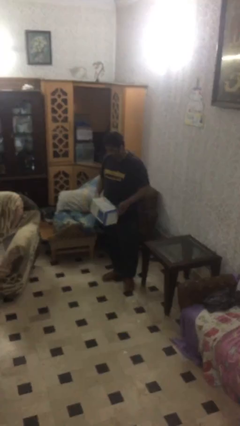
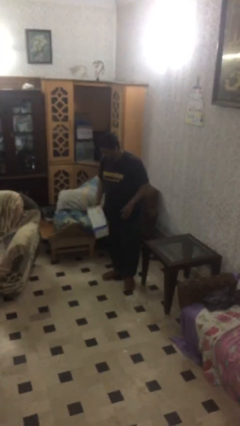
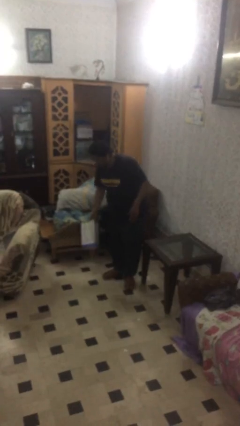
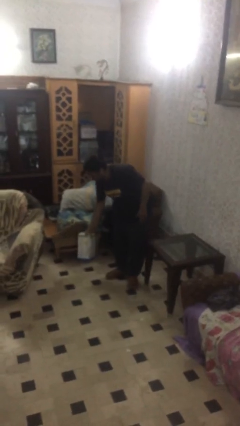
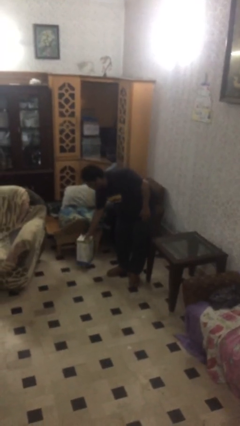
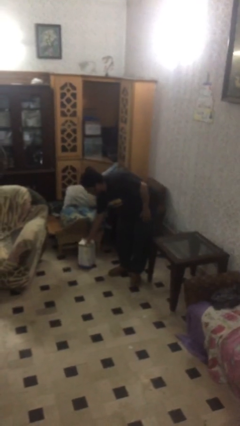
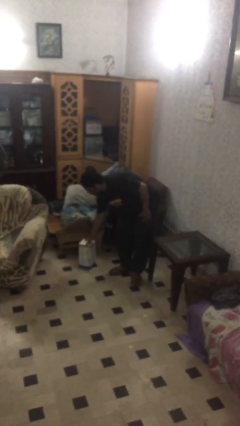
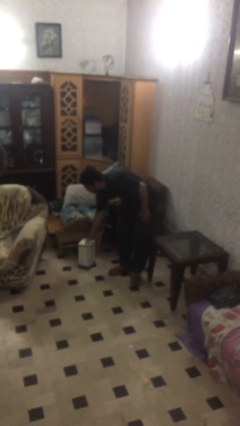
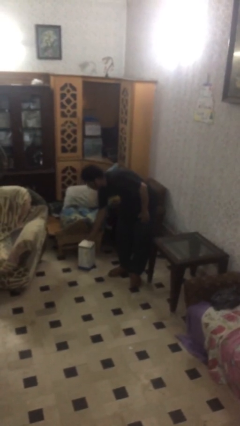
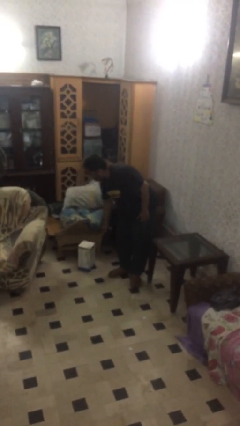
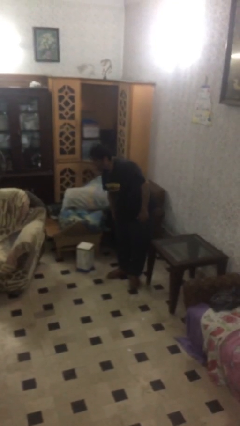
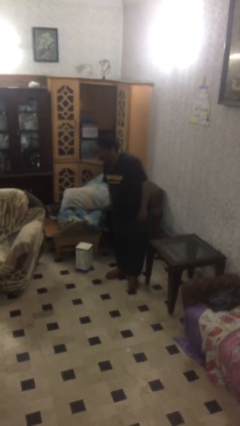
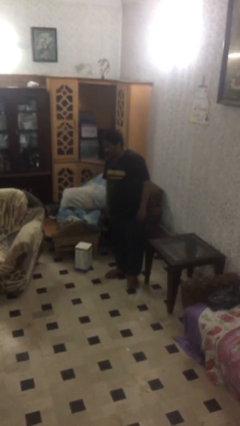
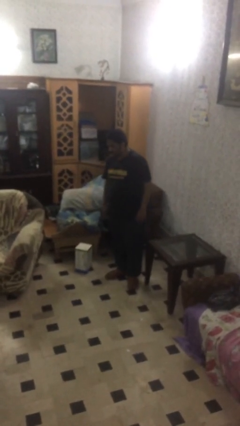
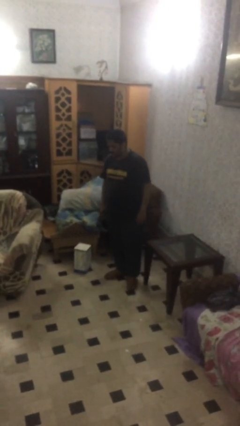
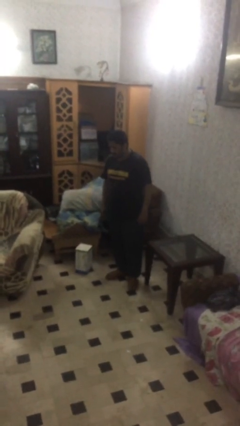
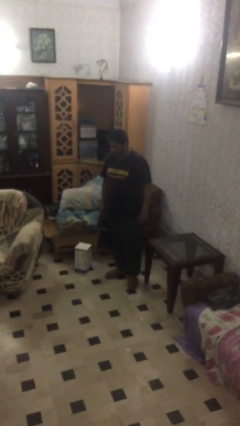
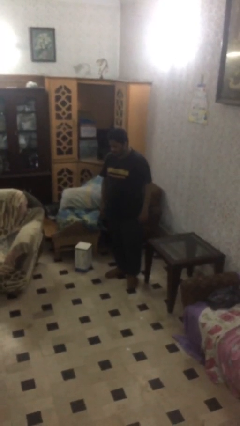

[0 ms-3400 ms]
person puts down object on floor

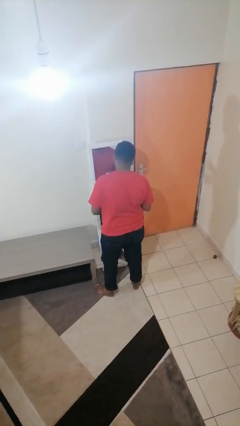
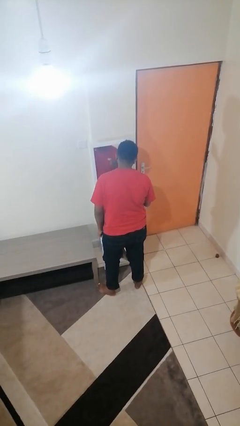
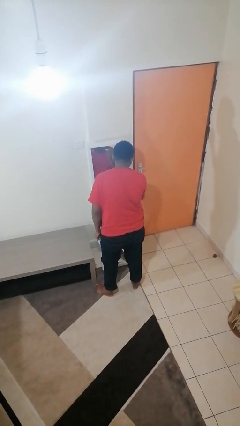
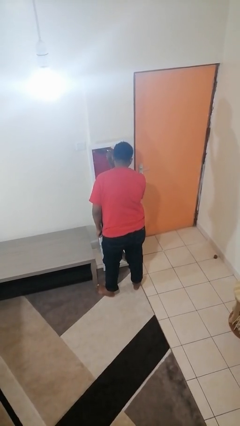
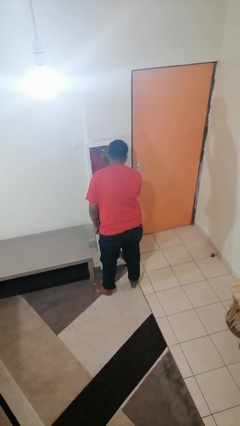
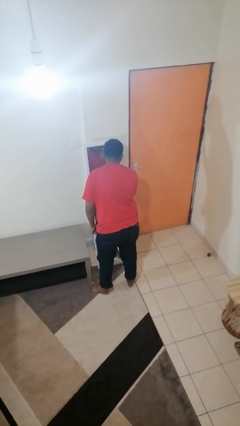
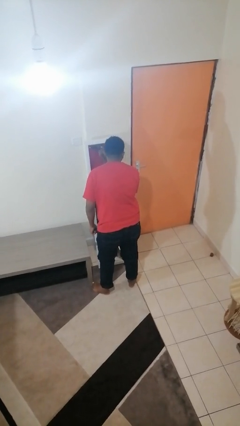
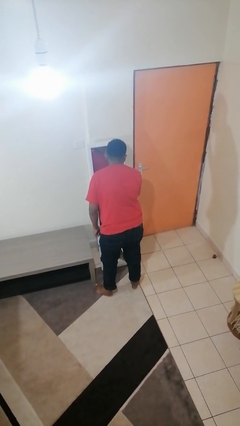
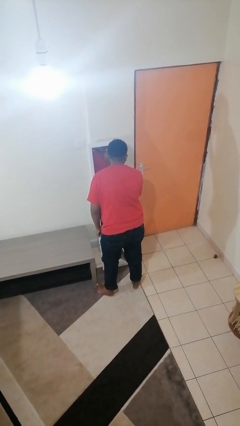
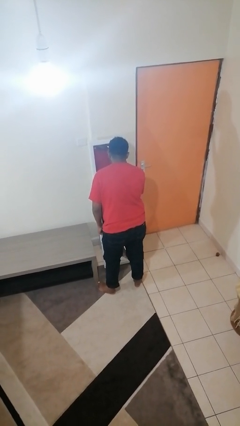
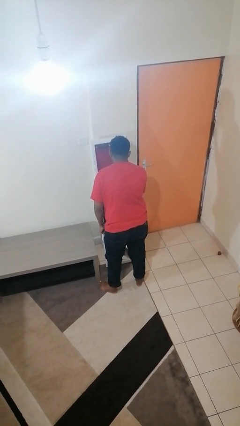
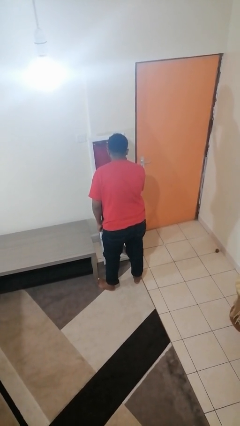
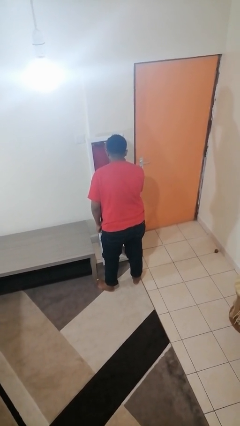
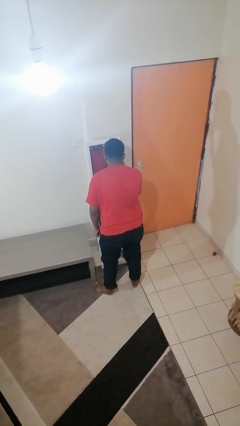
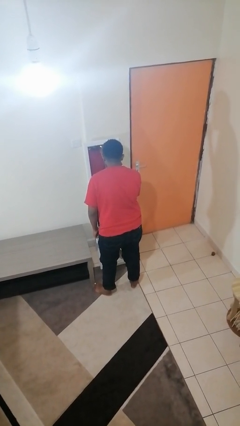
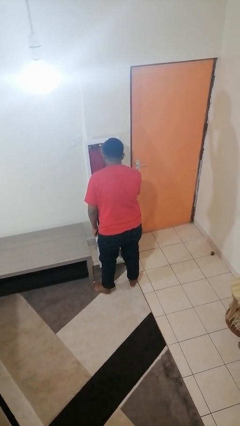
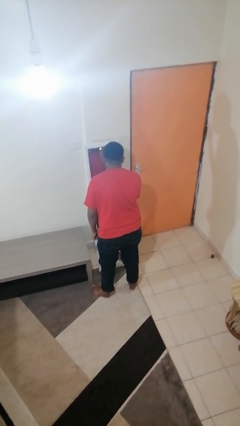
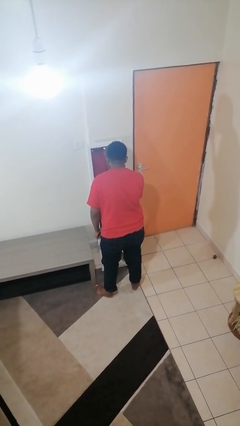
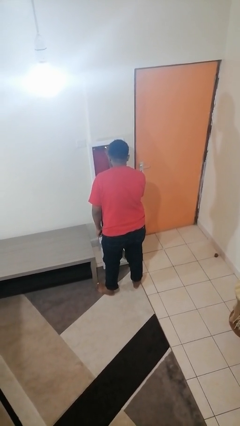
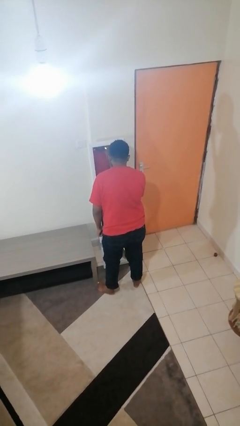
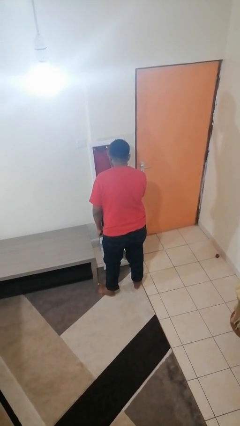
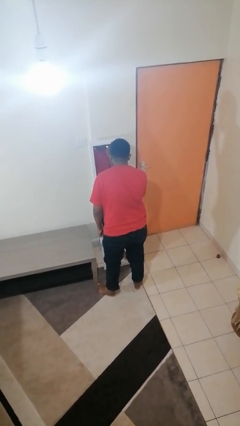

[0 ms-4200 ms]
person applies lip makeup

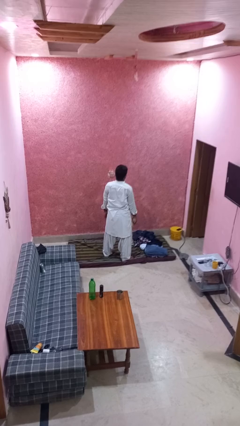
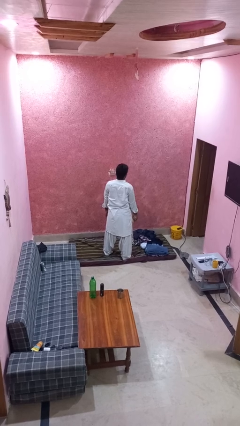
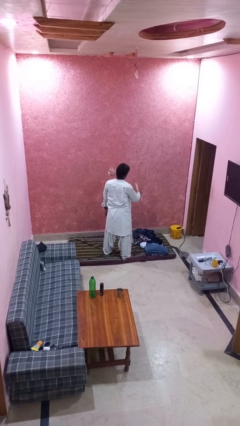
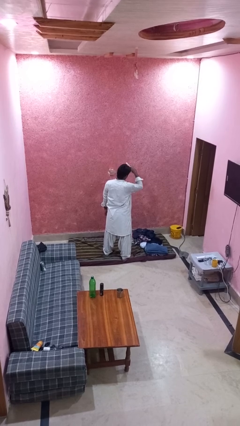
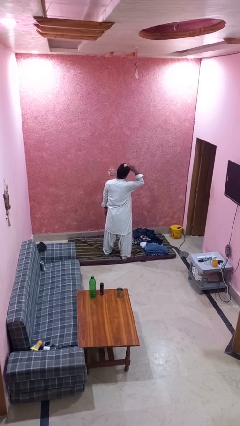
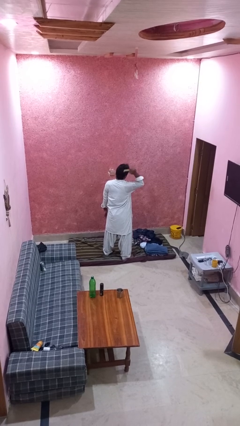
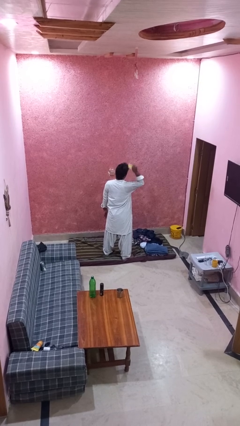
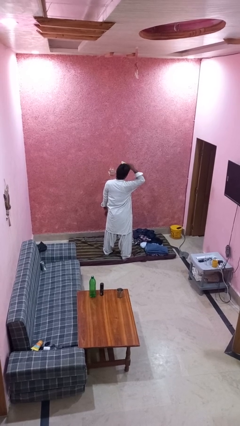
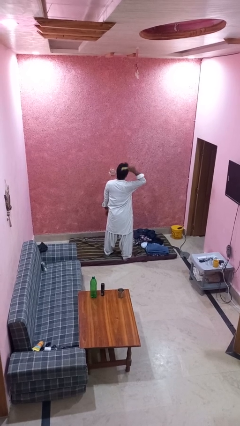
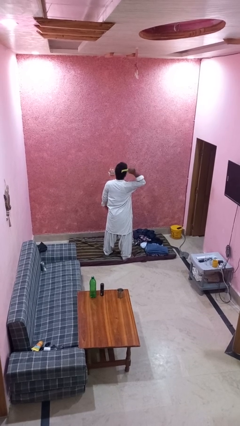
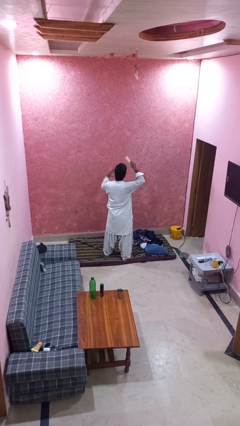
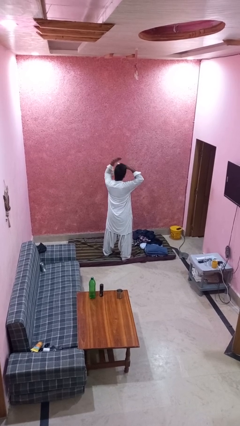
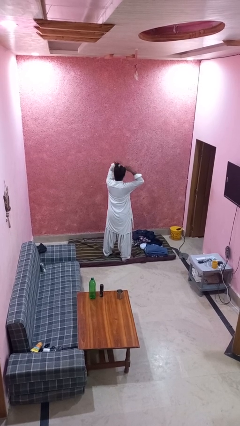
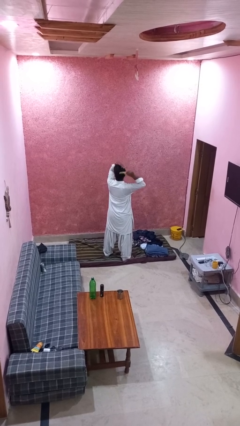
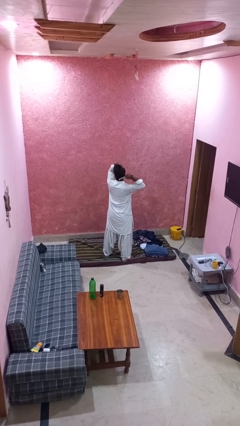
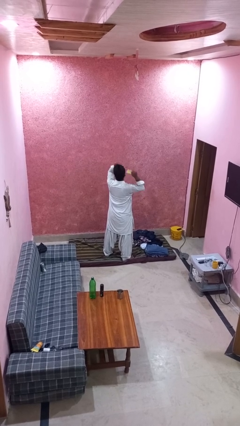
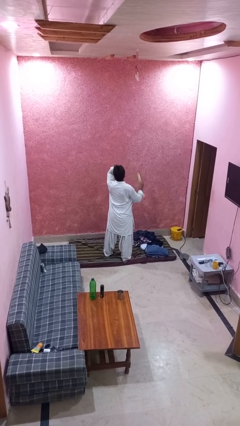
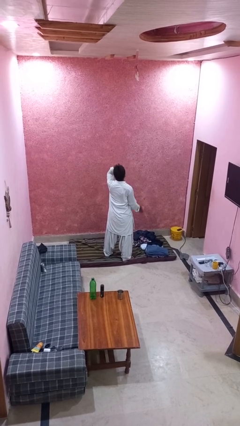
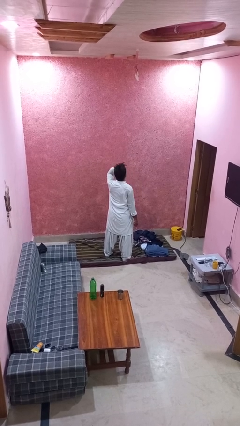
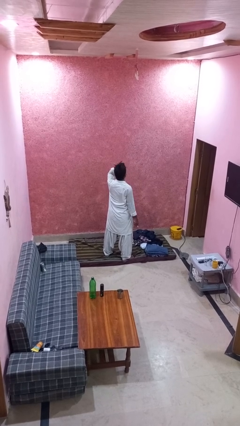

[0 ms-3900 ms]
person brushes hair

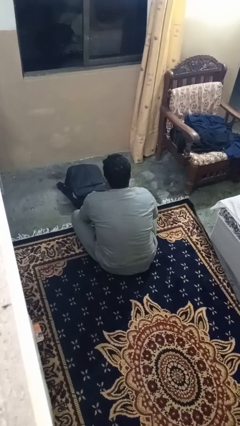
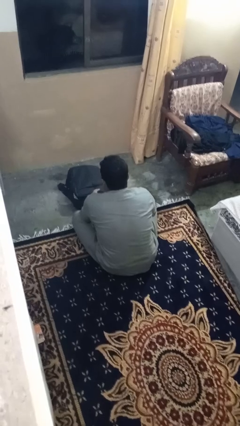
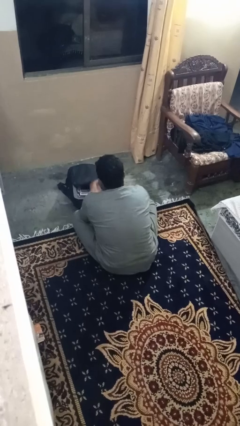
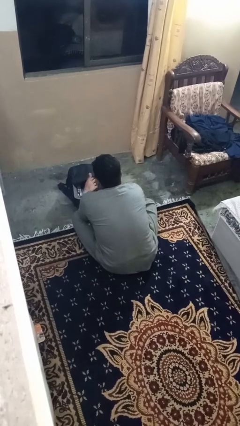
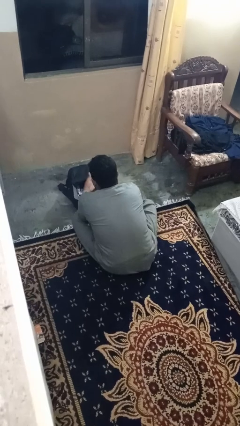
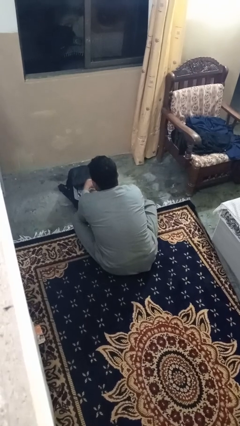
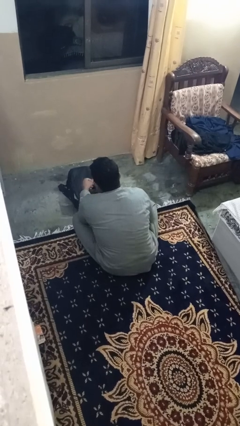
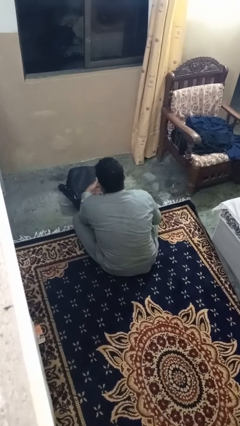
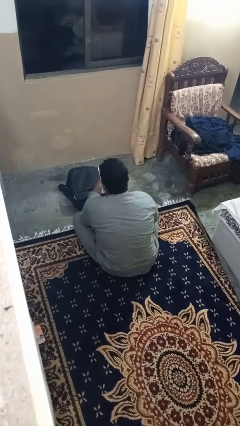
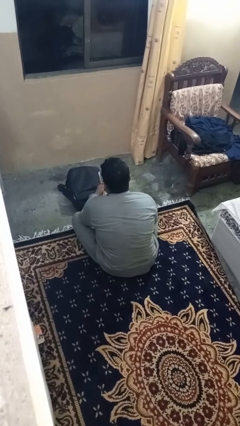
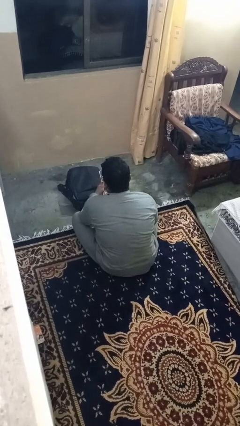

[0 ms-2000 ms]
person takes object from bag

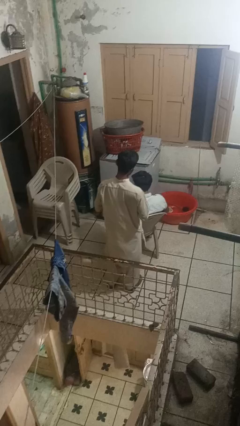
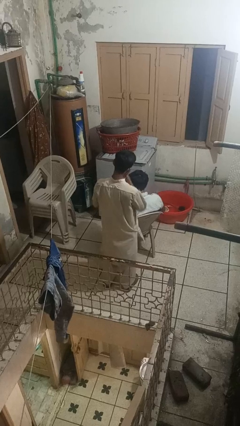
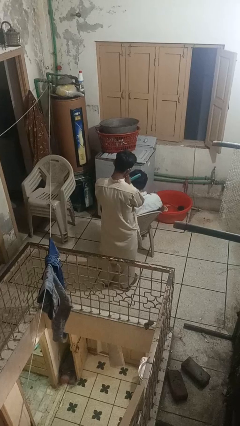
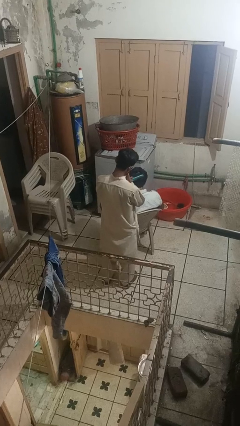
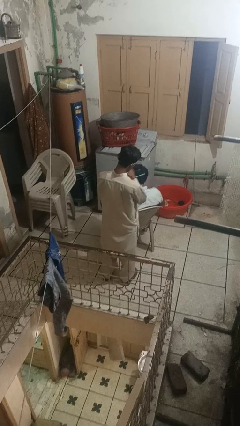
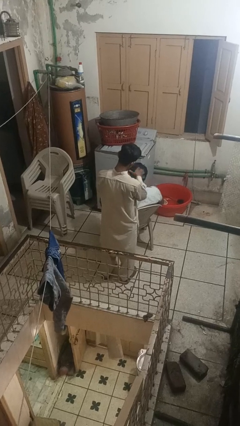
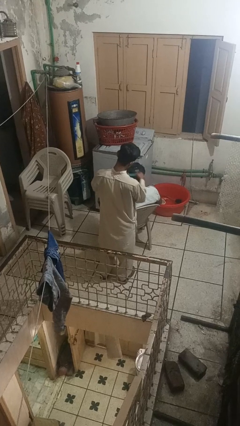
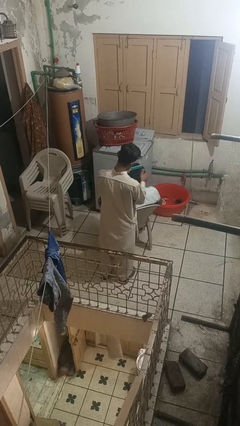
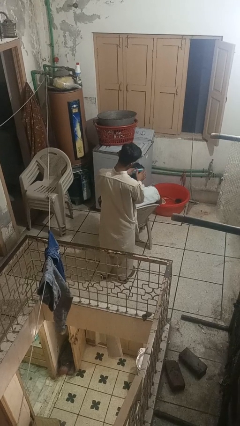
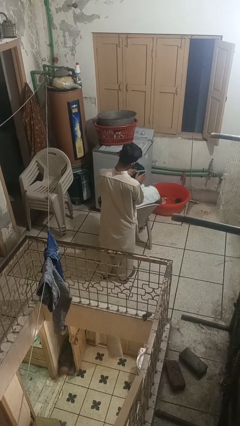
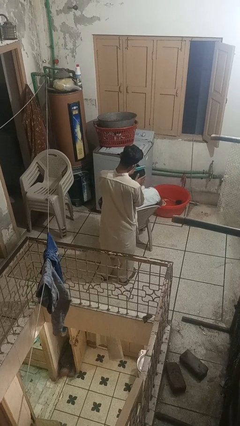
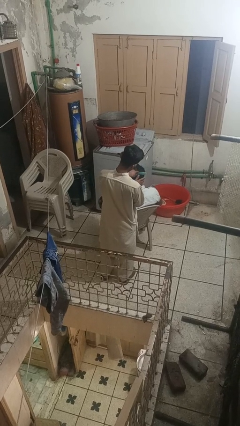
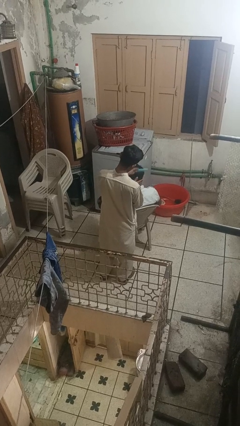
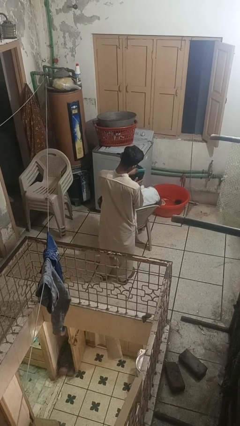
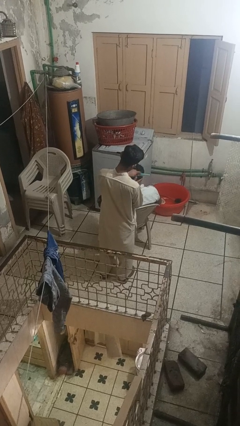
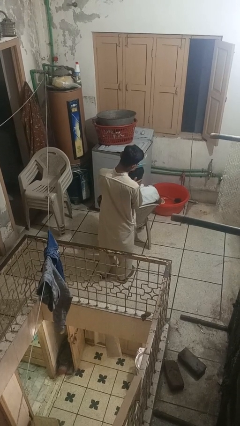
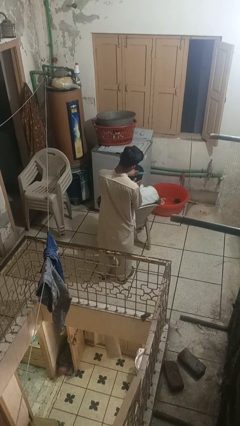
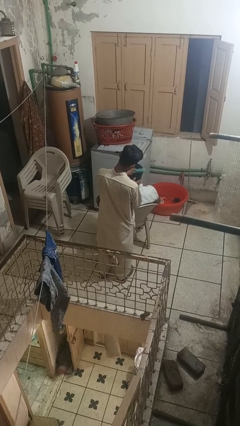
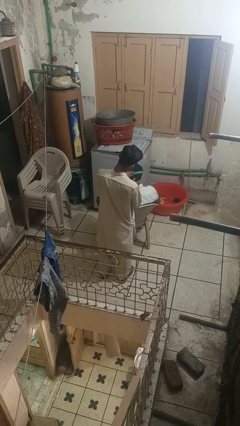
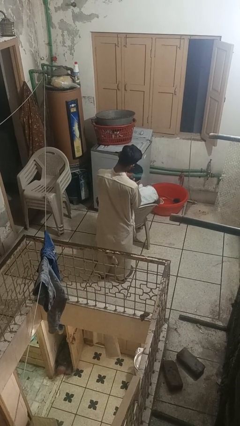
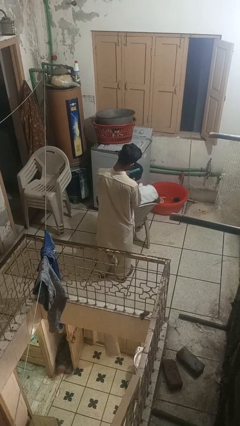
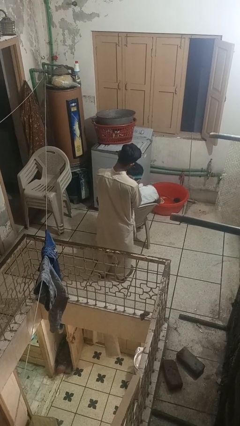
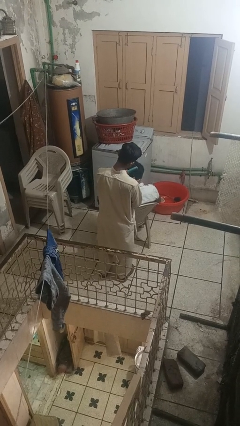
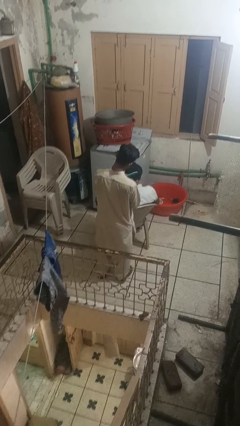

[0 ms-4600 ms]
person brushes hair of person
